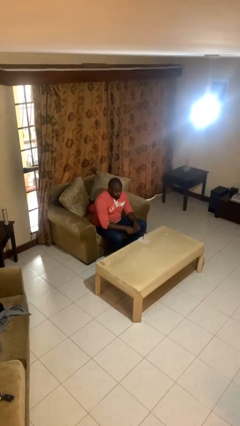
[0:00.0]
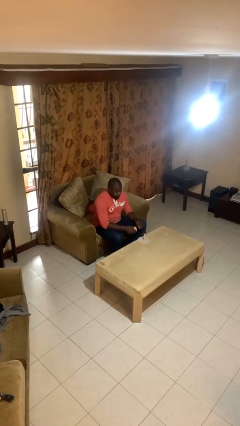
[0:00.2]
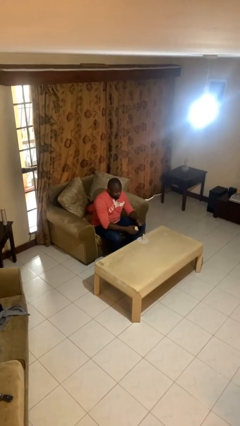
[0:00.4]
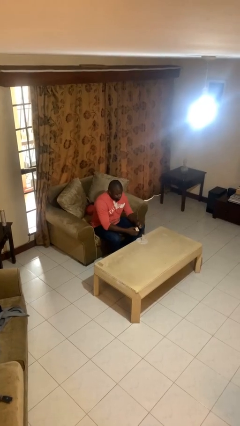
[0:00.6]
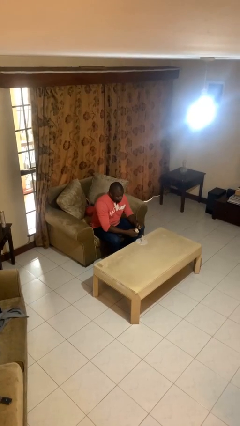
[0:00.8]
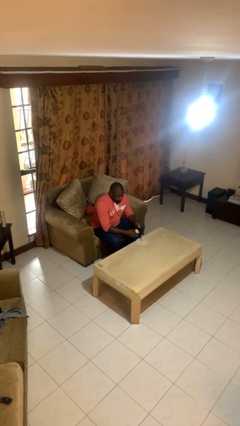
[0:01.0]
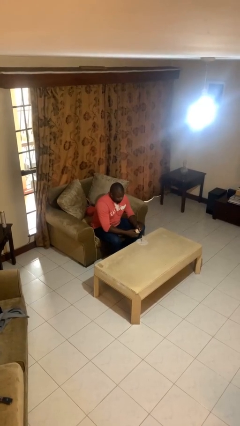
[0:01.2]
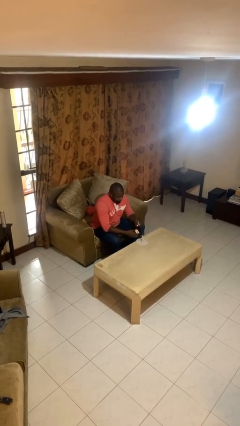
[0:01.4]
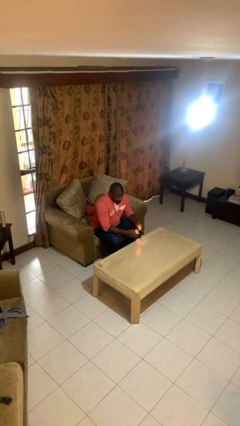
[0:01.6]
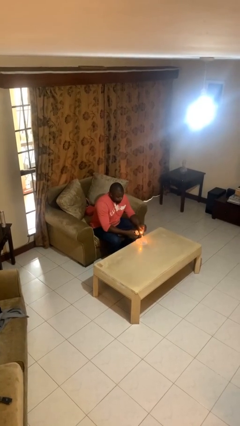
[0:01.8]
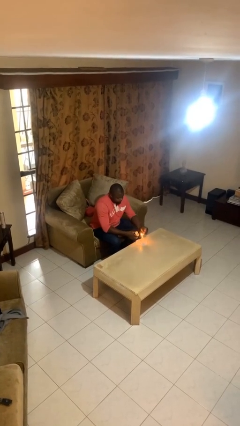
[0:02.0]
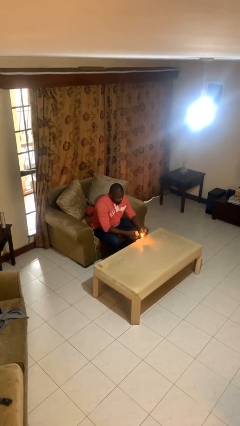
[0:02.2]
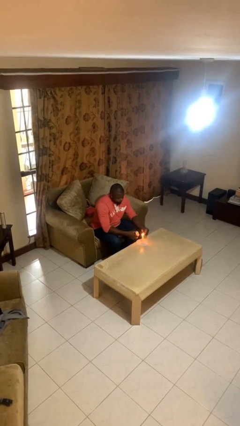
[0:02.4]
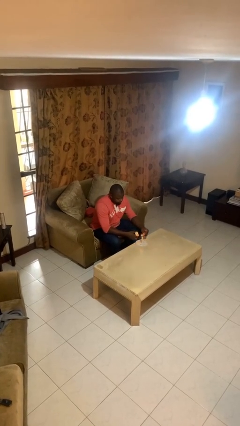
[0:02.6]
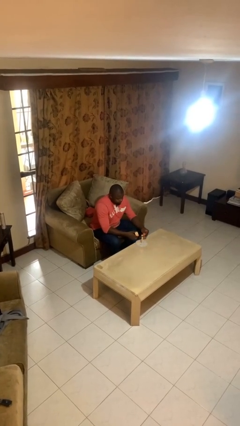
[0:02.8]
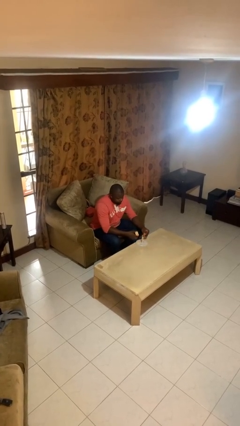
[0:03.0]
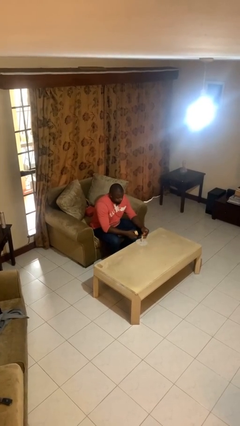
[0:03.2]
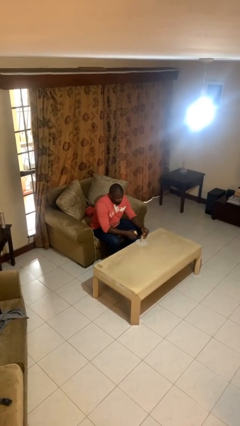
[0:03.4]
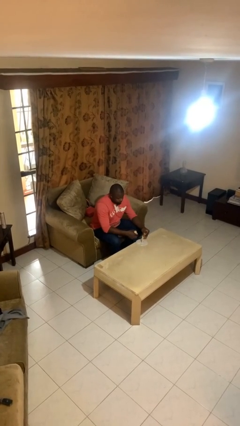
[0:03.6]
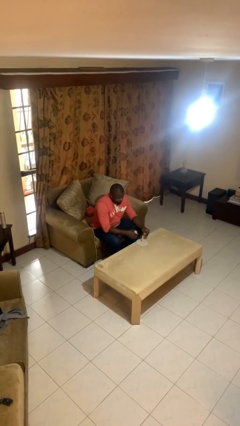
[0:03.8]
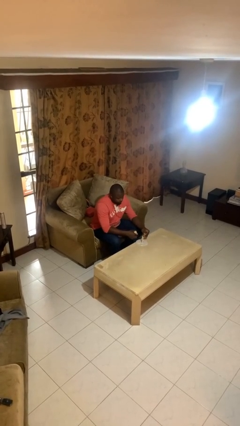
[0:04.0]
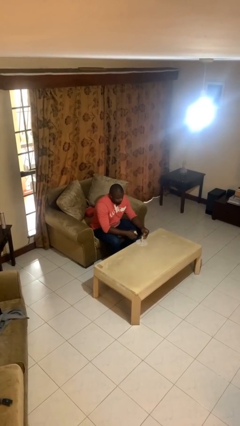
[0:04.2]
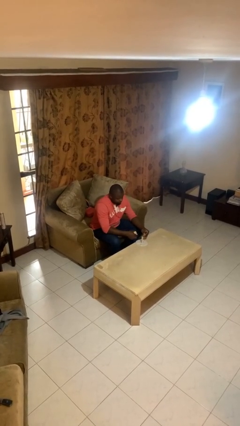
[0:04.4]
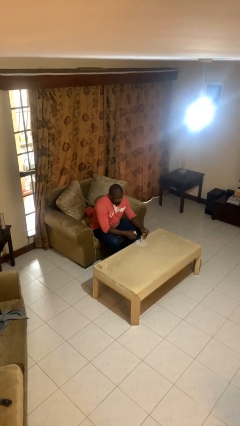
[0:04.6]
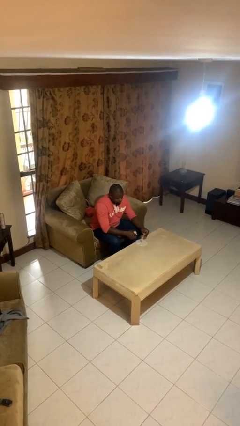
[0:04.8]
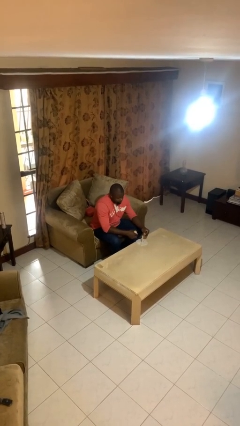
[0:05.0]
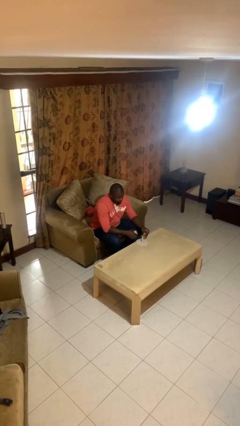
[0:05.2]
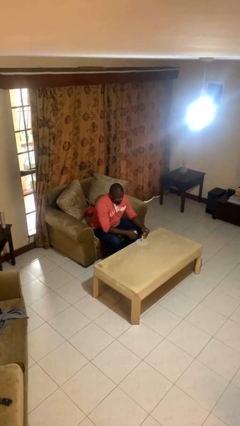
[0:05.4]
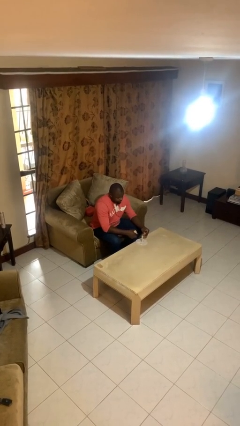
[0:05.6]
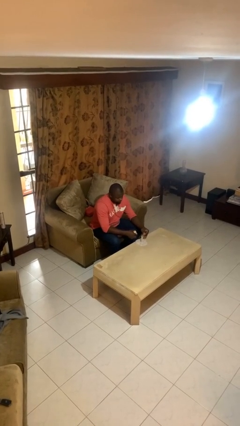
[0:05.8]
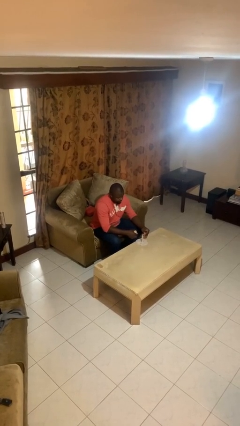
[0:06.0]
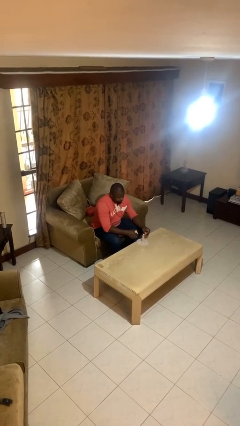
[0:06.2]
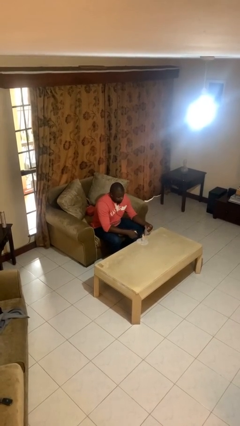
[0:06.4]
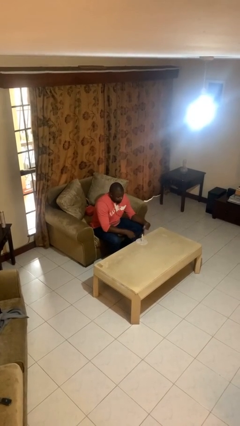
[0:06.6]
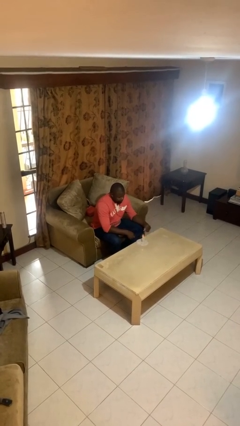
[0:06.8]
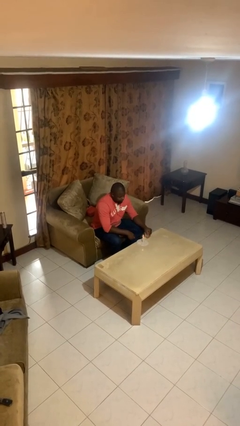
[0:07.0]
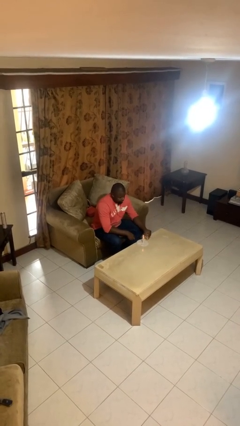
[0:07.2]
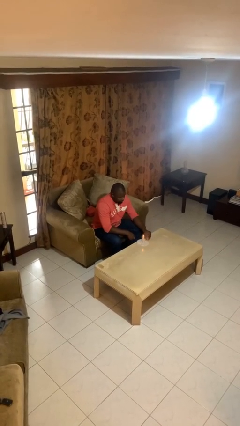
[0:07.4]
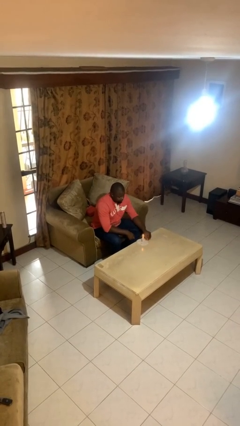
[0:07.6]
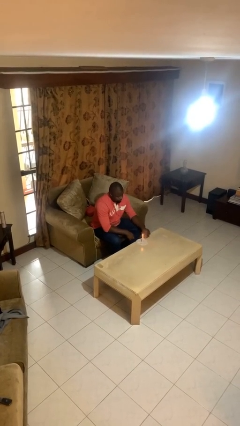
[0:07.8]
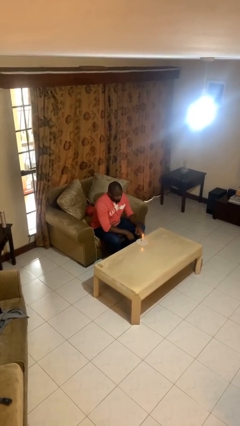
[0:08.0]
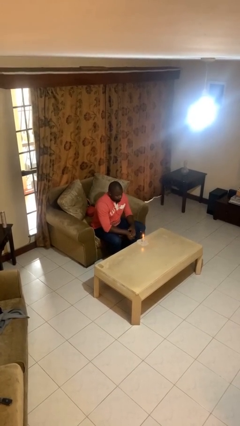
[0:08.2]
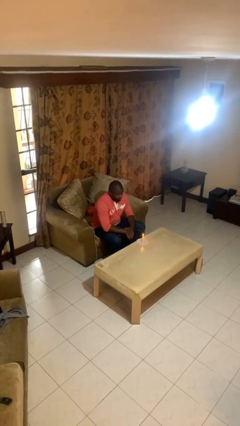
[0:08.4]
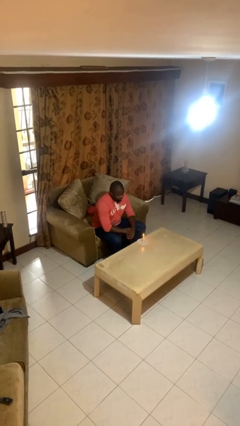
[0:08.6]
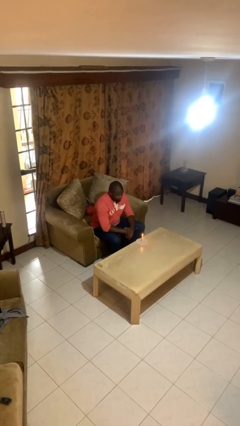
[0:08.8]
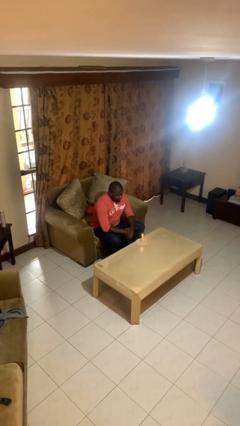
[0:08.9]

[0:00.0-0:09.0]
person lights candle

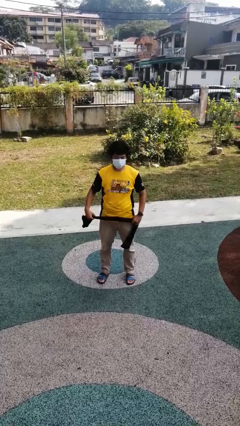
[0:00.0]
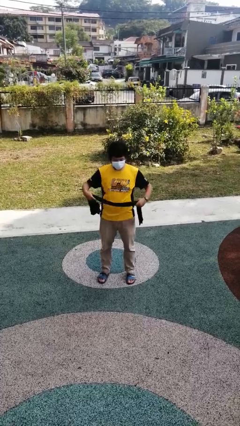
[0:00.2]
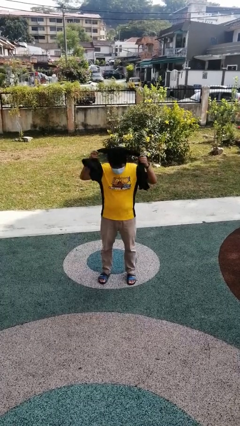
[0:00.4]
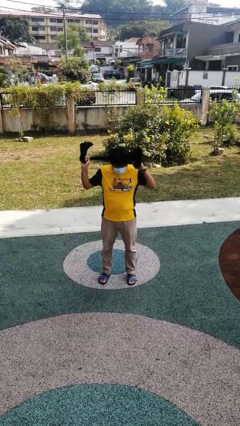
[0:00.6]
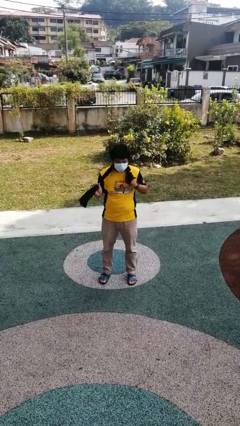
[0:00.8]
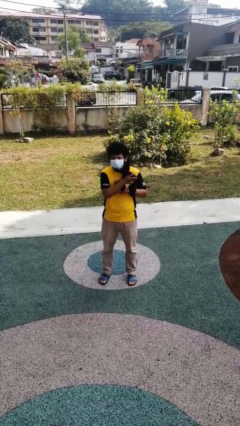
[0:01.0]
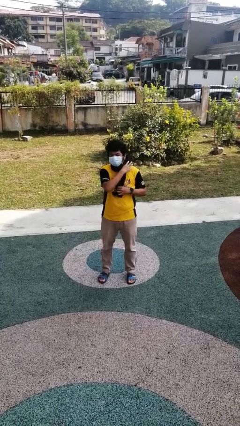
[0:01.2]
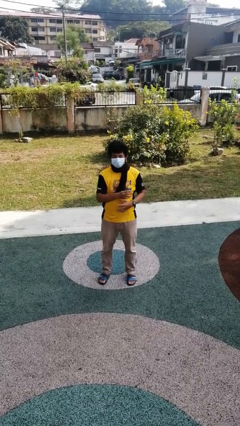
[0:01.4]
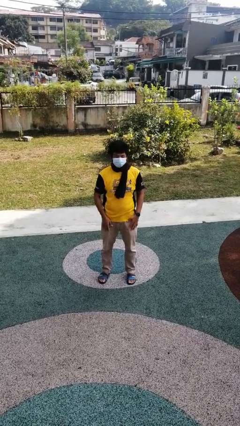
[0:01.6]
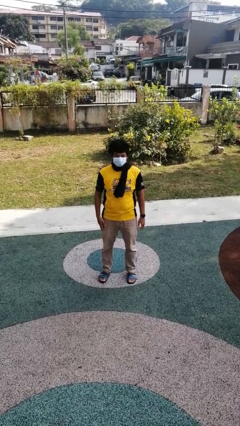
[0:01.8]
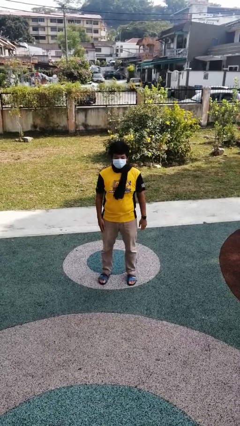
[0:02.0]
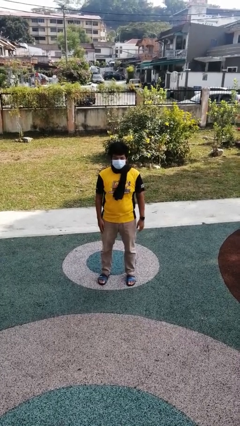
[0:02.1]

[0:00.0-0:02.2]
person puts on scarf

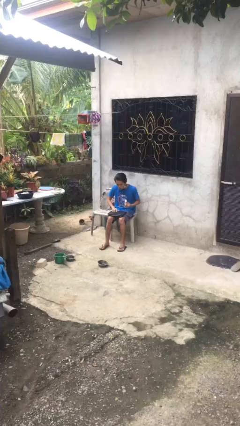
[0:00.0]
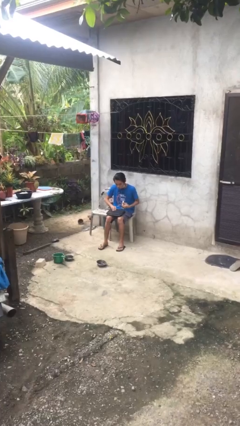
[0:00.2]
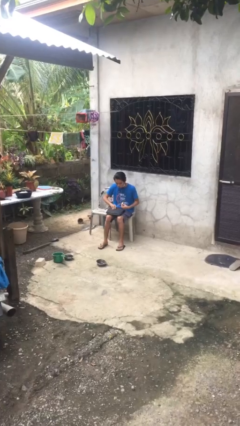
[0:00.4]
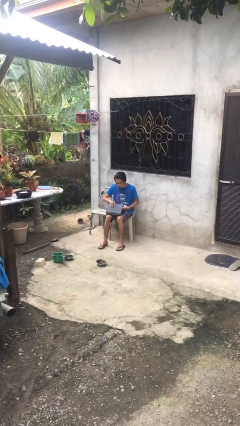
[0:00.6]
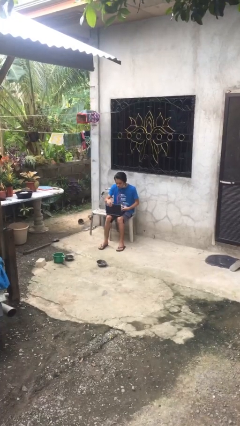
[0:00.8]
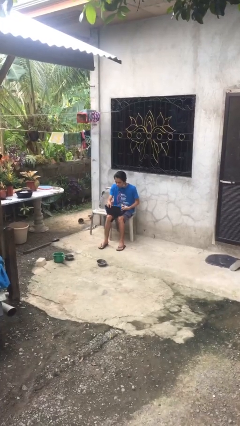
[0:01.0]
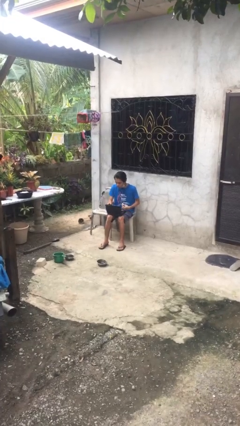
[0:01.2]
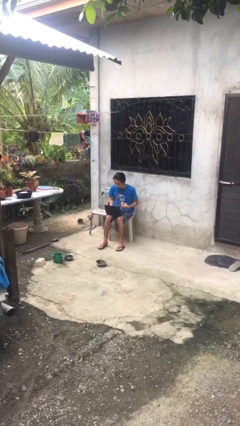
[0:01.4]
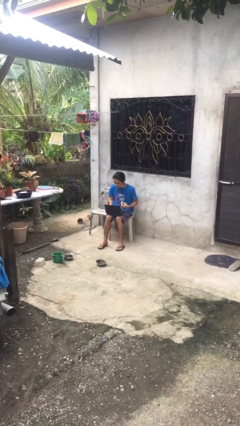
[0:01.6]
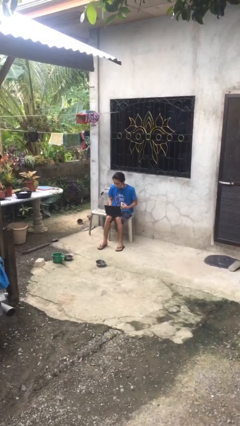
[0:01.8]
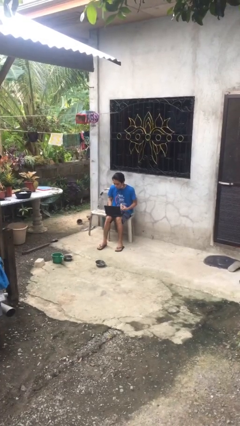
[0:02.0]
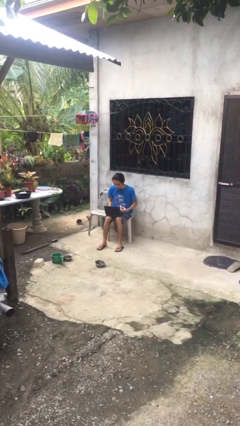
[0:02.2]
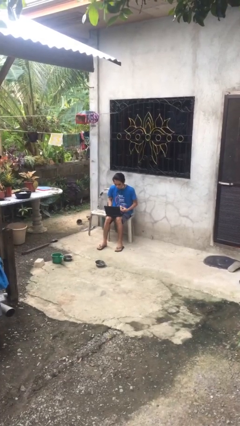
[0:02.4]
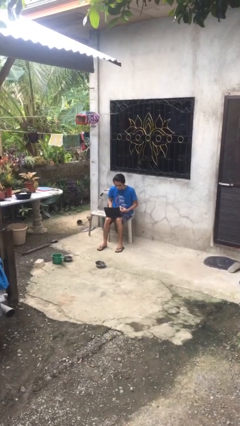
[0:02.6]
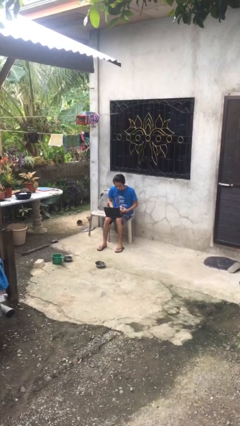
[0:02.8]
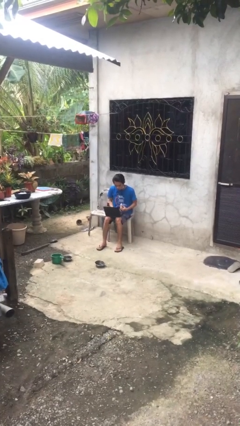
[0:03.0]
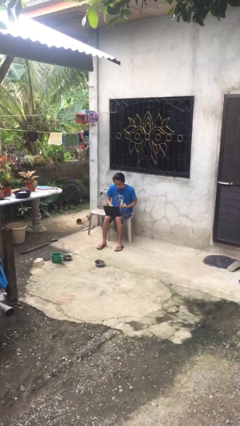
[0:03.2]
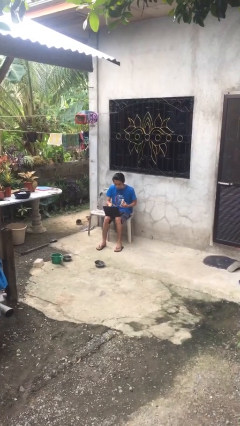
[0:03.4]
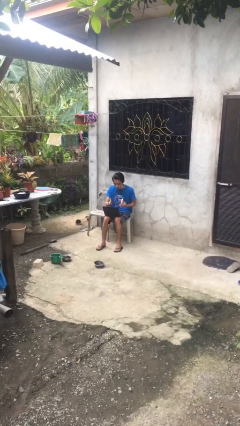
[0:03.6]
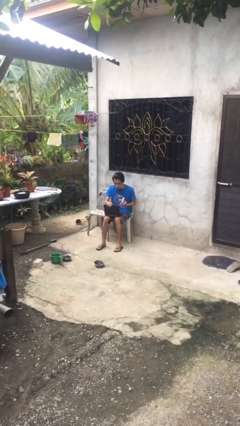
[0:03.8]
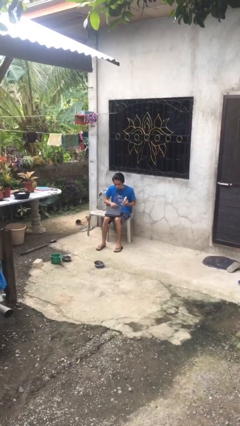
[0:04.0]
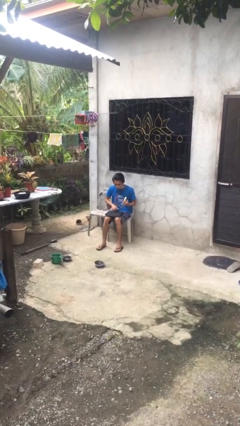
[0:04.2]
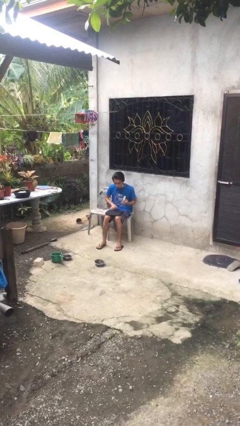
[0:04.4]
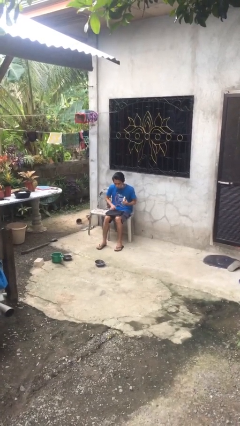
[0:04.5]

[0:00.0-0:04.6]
person interacts with laptop

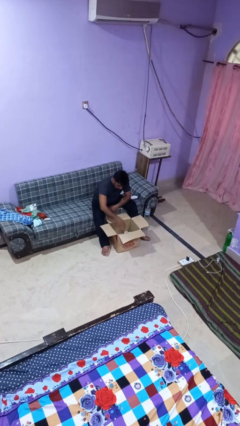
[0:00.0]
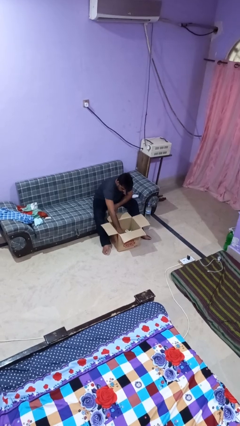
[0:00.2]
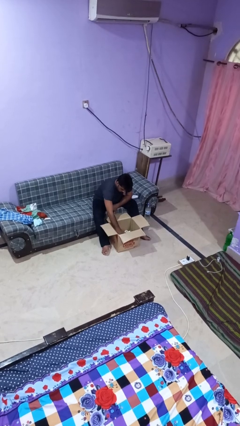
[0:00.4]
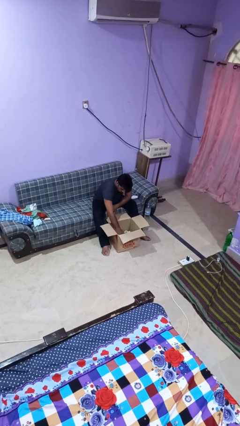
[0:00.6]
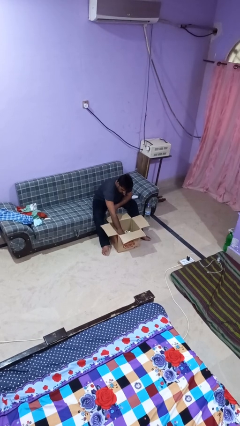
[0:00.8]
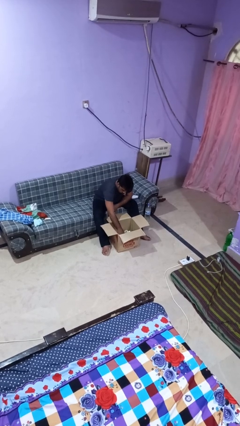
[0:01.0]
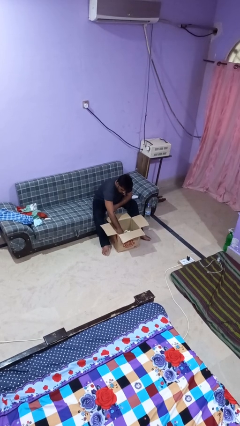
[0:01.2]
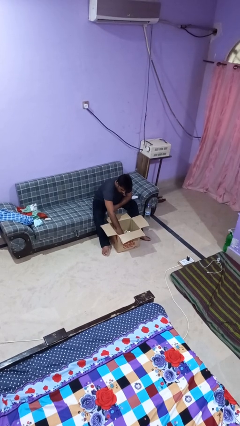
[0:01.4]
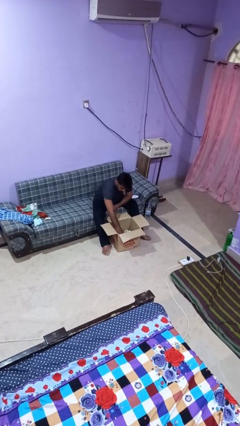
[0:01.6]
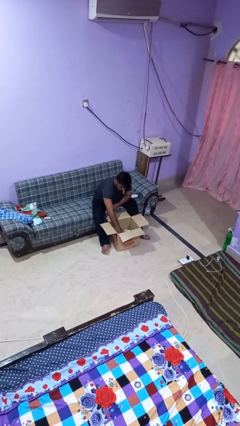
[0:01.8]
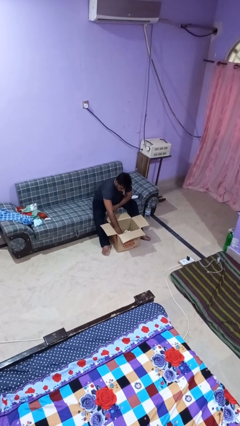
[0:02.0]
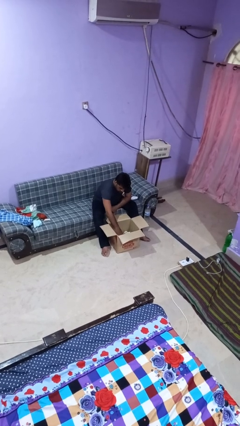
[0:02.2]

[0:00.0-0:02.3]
person searches in box
